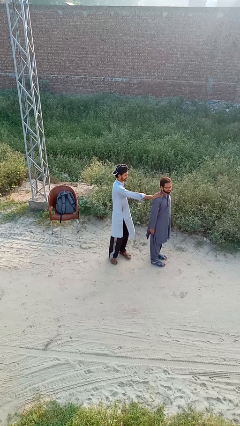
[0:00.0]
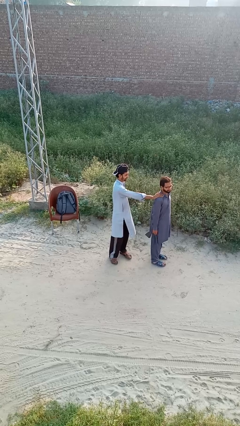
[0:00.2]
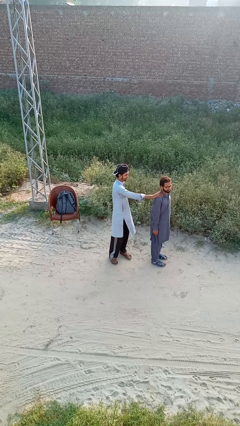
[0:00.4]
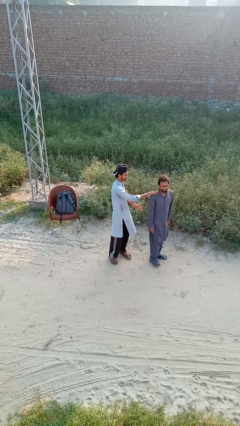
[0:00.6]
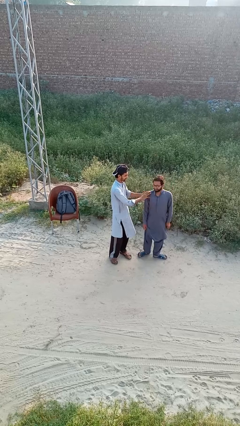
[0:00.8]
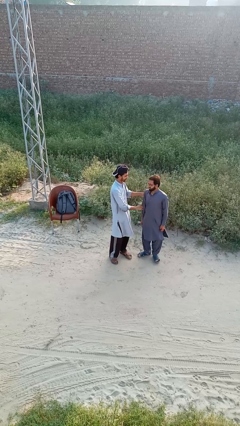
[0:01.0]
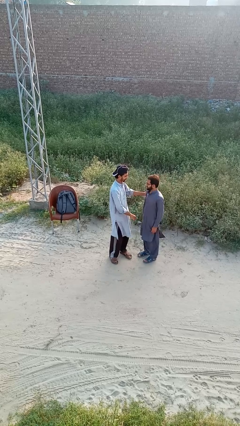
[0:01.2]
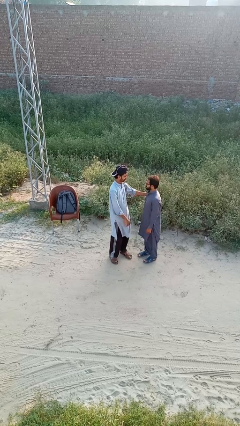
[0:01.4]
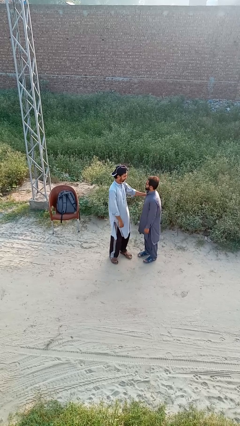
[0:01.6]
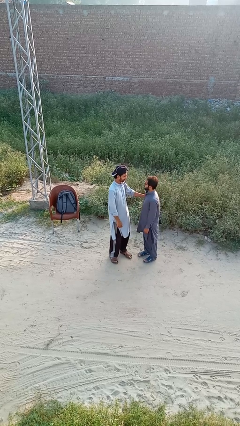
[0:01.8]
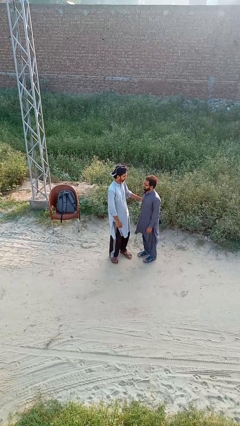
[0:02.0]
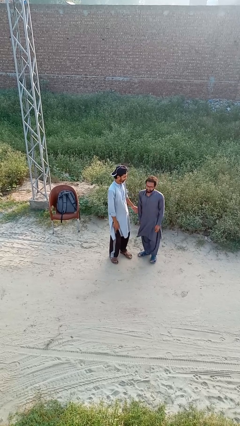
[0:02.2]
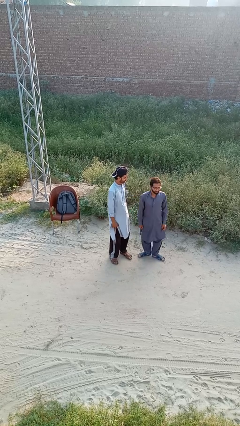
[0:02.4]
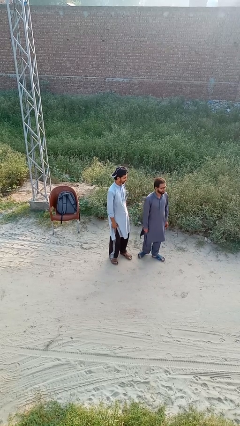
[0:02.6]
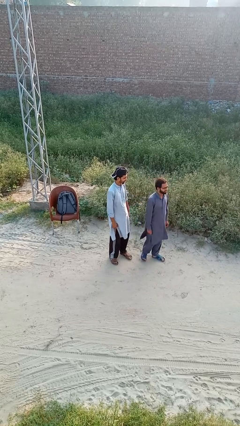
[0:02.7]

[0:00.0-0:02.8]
person spins person around

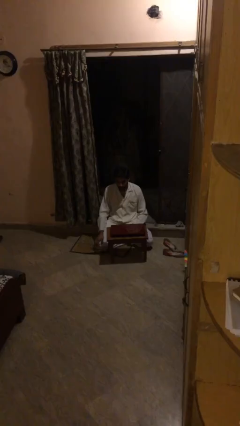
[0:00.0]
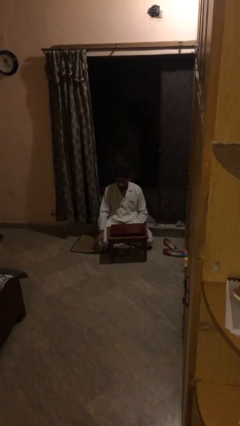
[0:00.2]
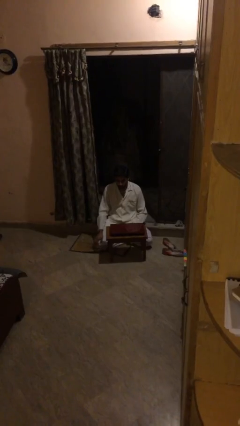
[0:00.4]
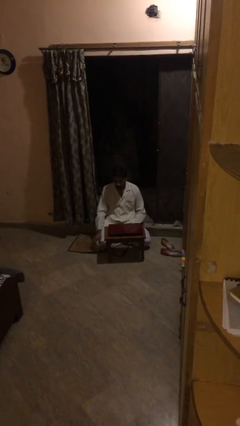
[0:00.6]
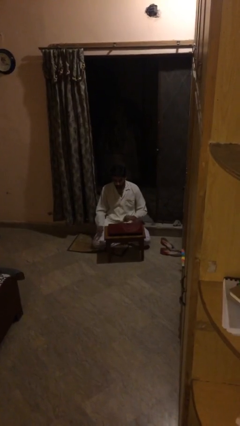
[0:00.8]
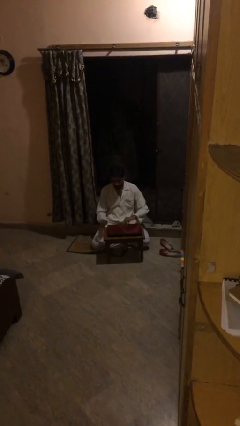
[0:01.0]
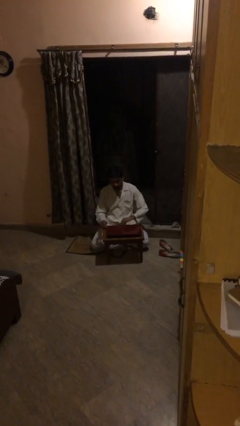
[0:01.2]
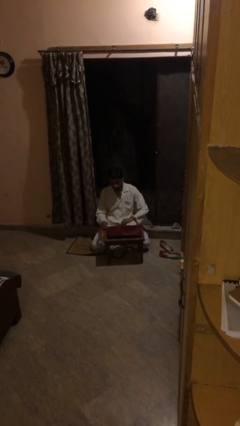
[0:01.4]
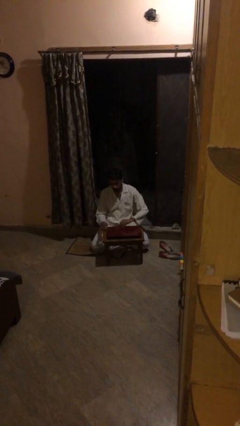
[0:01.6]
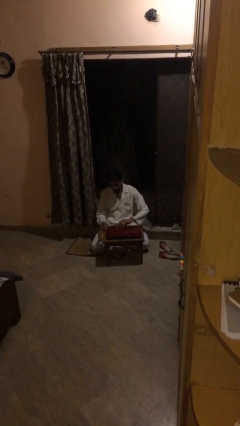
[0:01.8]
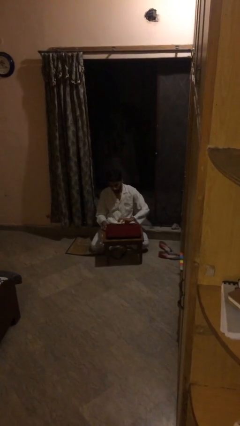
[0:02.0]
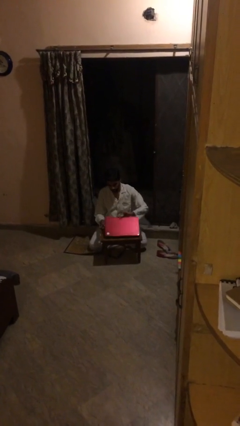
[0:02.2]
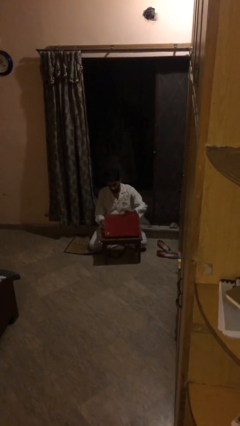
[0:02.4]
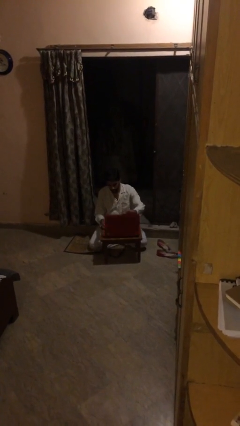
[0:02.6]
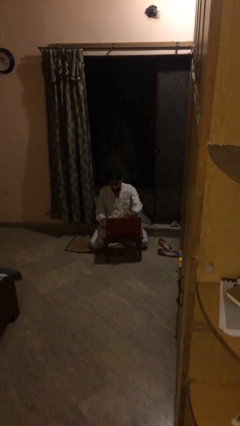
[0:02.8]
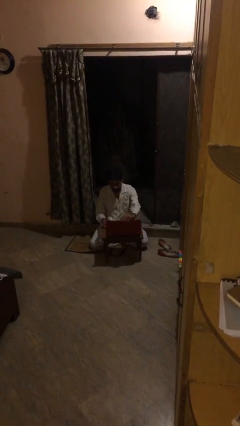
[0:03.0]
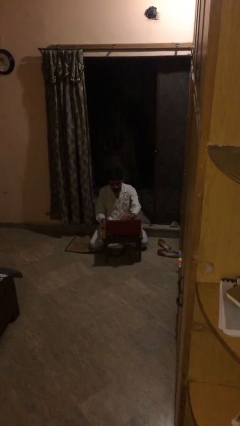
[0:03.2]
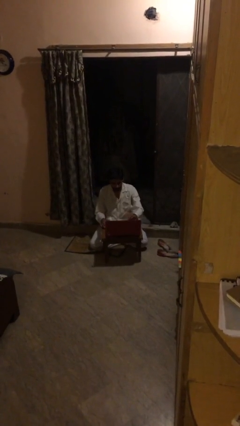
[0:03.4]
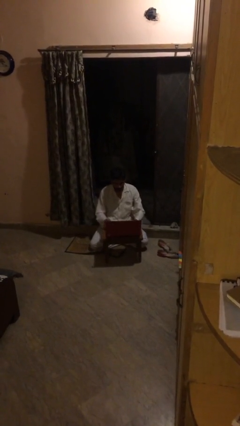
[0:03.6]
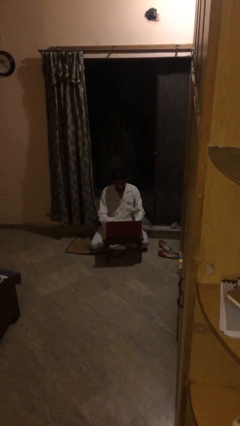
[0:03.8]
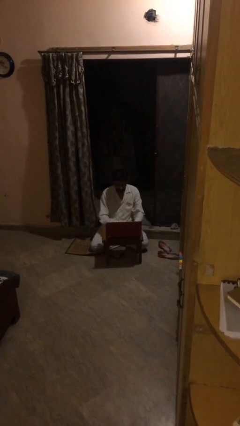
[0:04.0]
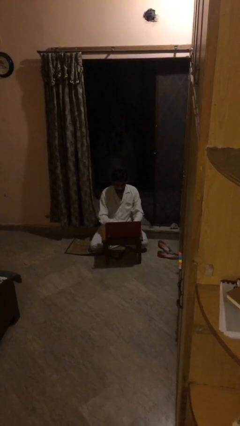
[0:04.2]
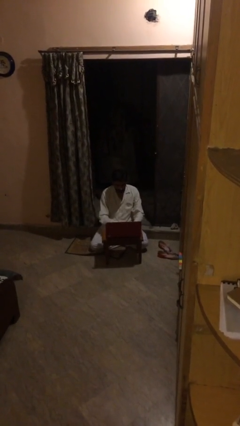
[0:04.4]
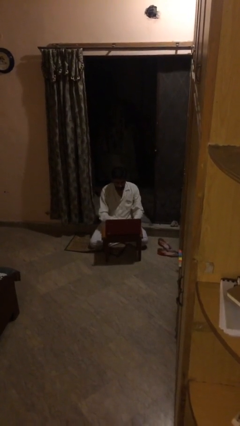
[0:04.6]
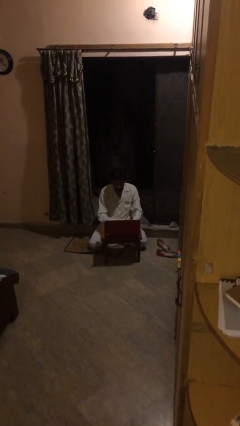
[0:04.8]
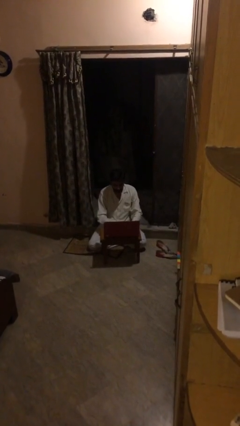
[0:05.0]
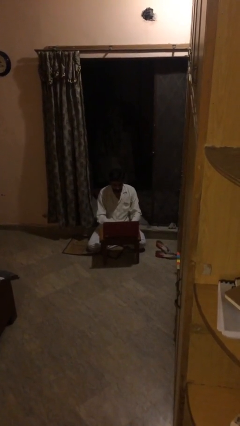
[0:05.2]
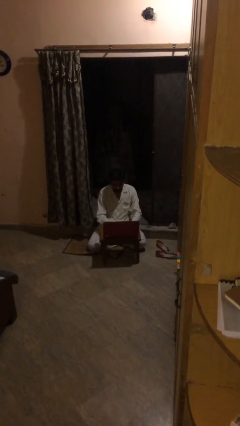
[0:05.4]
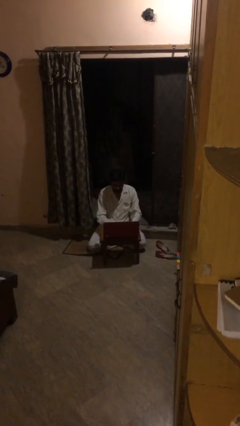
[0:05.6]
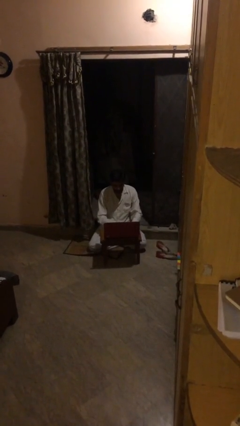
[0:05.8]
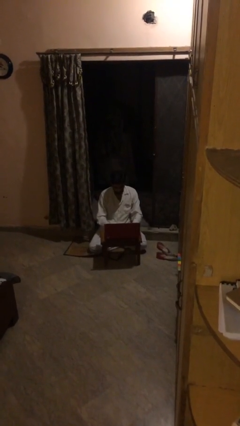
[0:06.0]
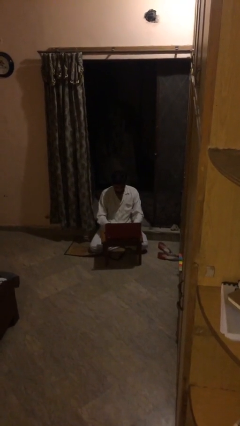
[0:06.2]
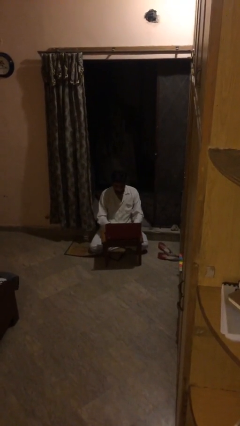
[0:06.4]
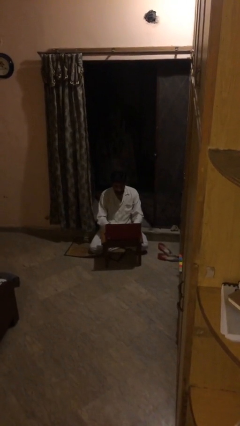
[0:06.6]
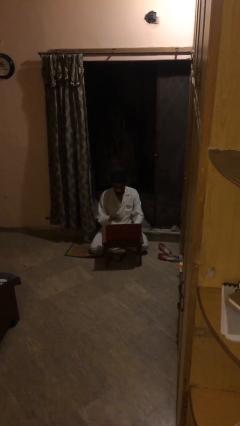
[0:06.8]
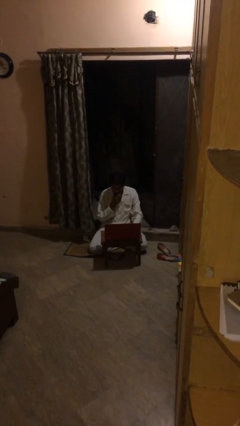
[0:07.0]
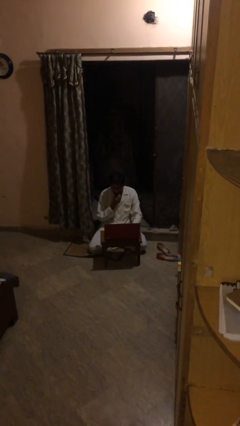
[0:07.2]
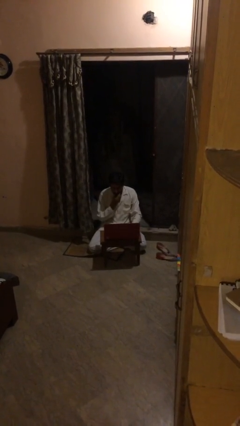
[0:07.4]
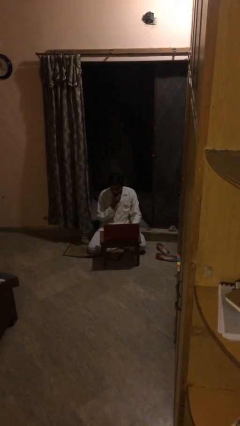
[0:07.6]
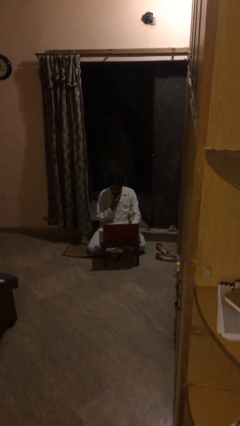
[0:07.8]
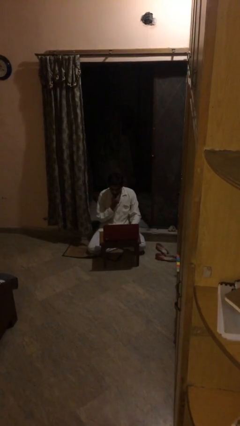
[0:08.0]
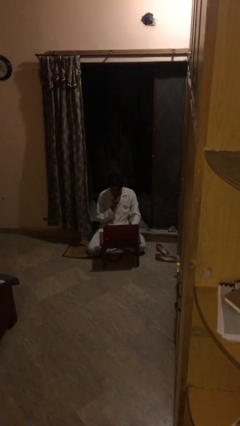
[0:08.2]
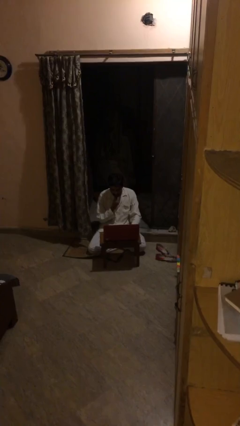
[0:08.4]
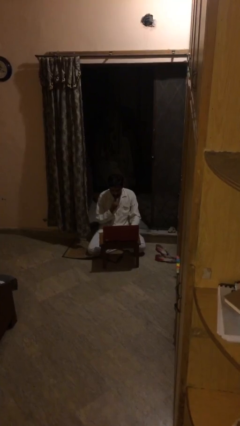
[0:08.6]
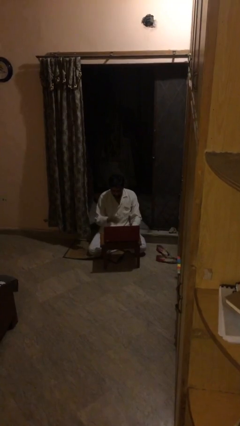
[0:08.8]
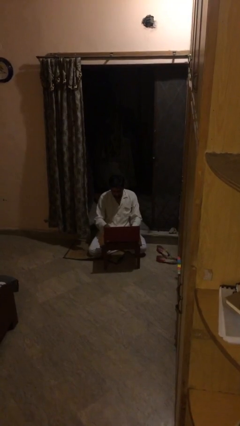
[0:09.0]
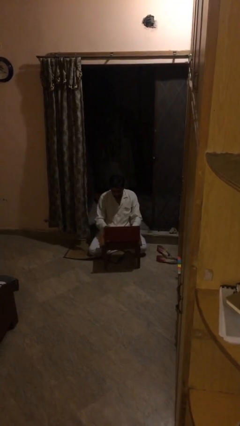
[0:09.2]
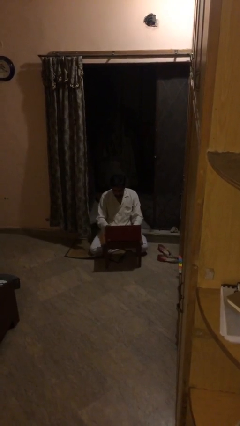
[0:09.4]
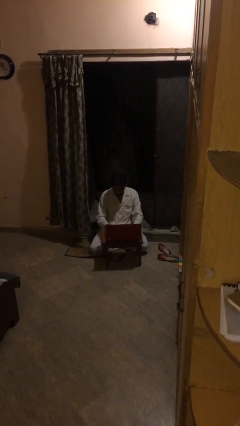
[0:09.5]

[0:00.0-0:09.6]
person interacts with laptop

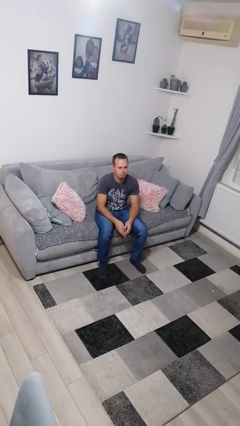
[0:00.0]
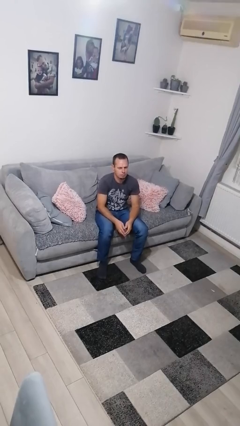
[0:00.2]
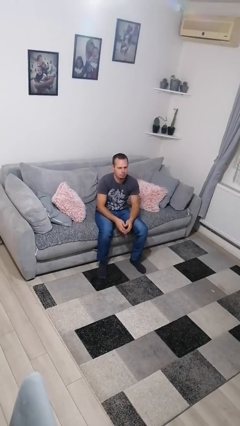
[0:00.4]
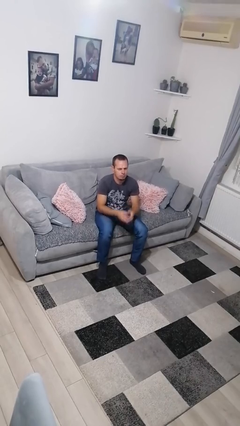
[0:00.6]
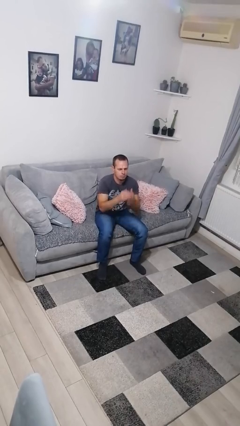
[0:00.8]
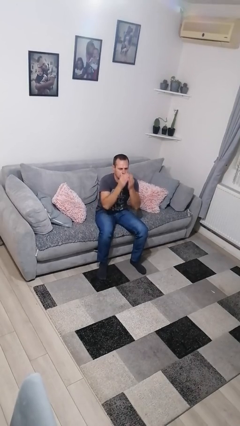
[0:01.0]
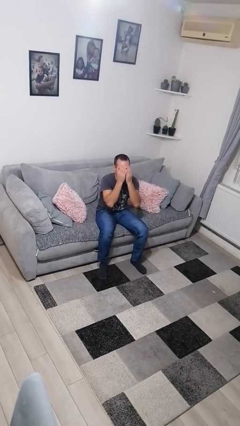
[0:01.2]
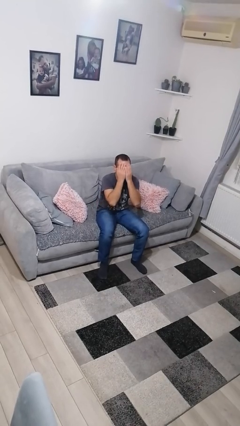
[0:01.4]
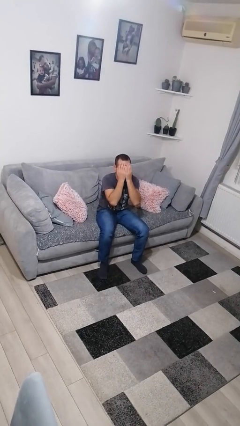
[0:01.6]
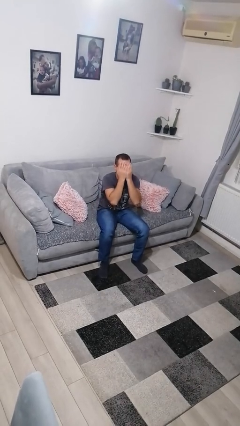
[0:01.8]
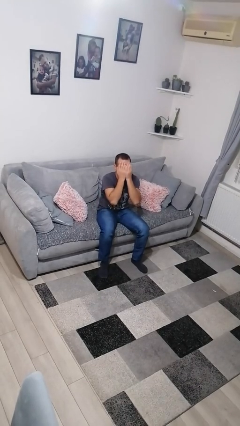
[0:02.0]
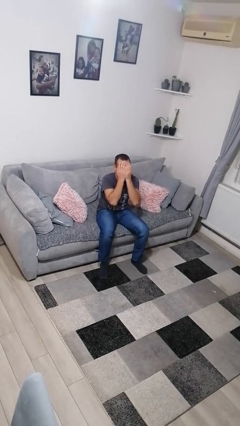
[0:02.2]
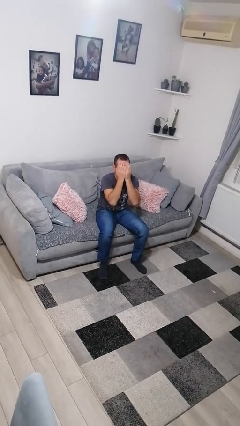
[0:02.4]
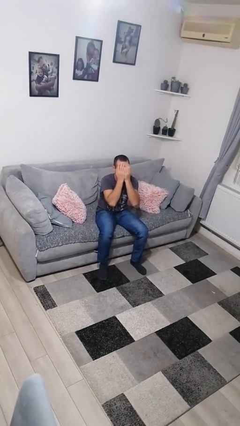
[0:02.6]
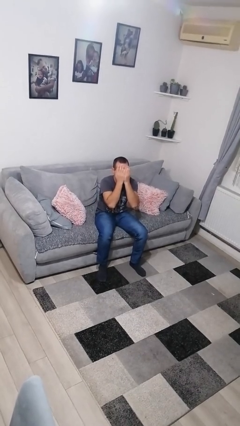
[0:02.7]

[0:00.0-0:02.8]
person covers face with hands

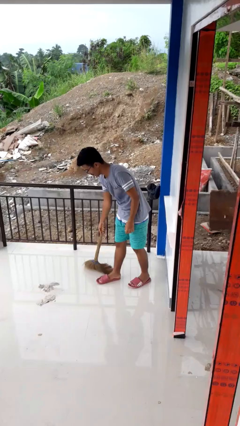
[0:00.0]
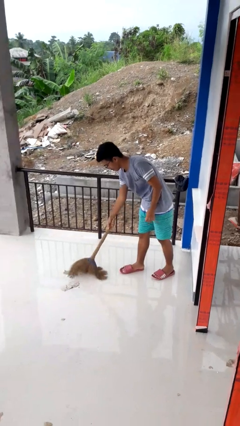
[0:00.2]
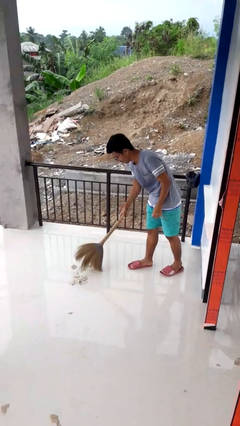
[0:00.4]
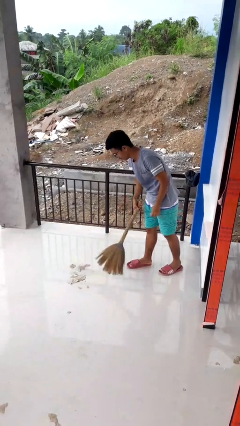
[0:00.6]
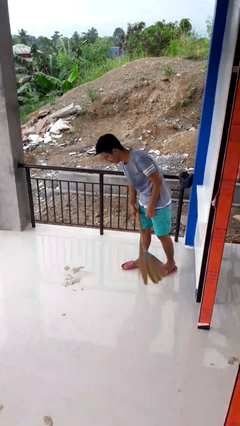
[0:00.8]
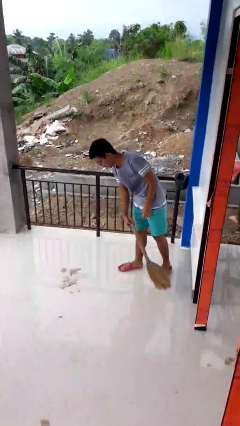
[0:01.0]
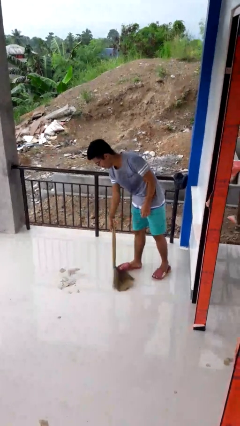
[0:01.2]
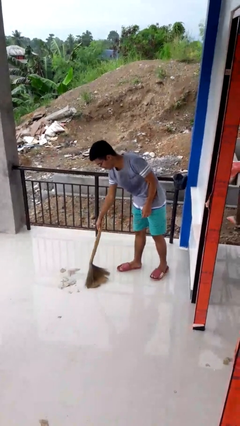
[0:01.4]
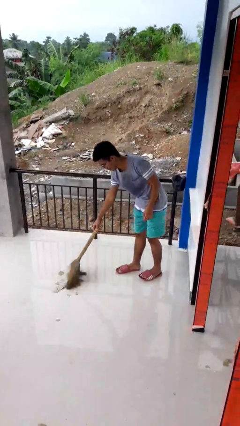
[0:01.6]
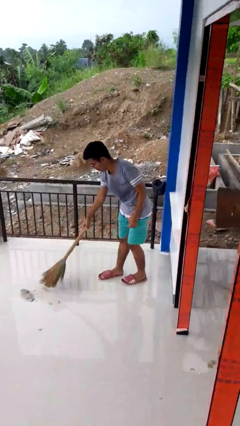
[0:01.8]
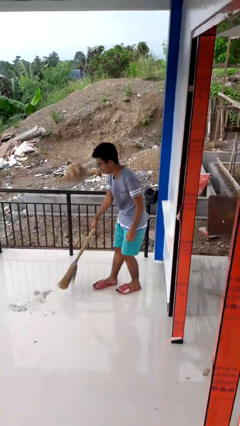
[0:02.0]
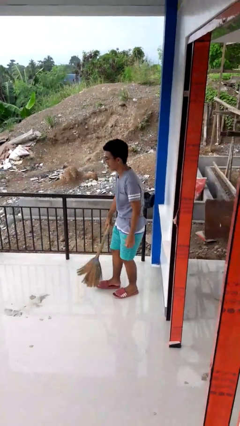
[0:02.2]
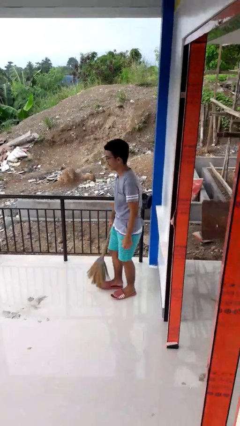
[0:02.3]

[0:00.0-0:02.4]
person sweeps floor
